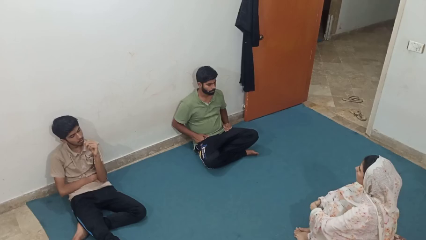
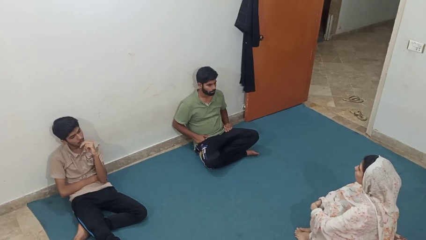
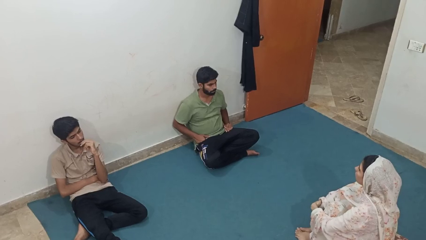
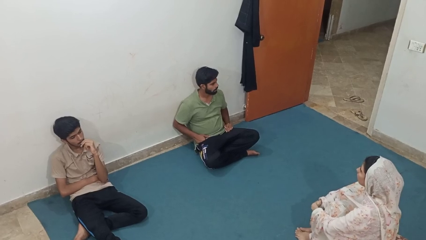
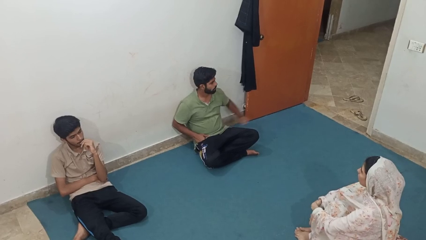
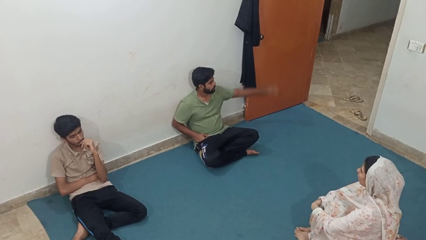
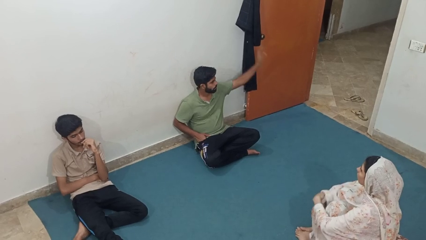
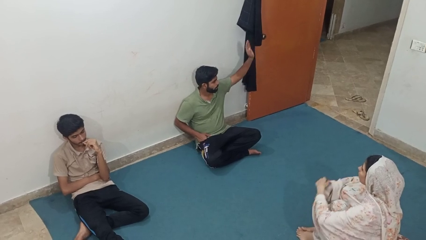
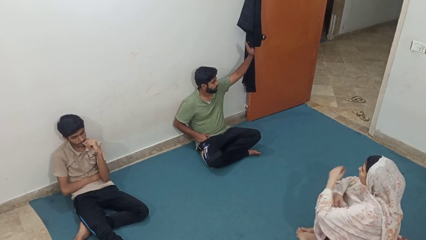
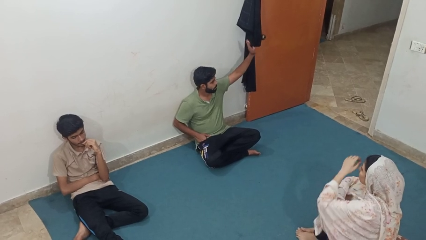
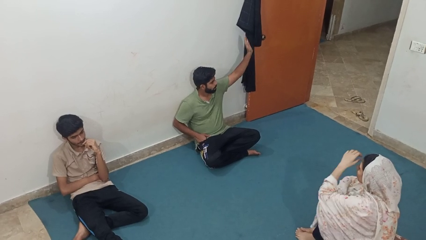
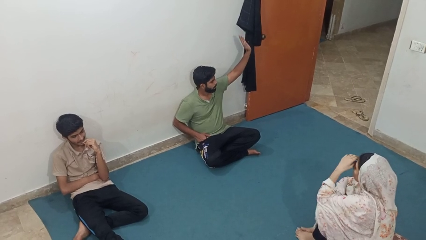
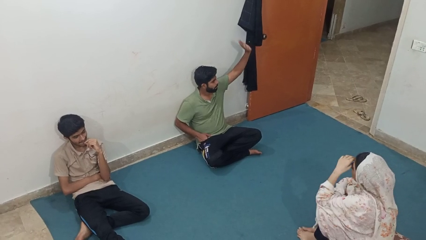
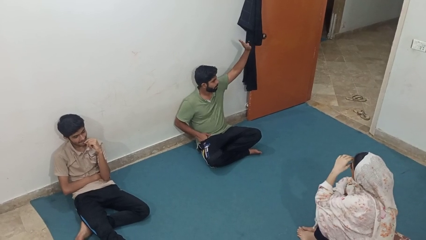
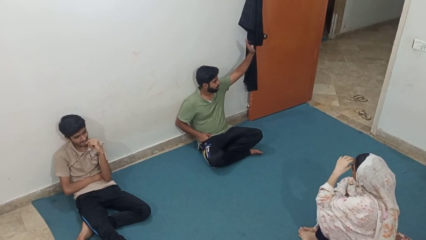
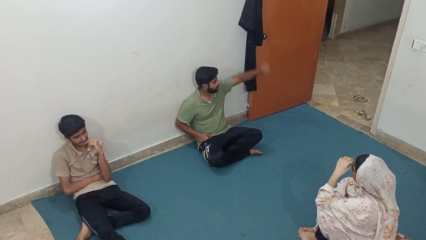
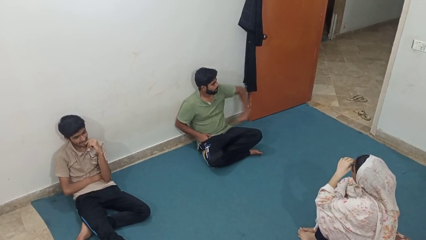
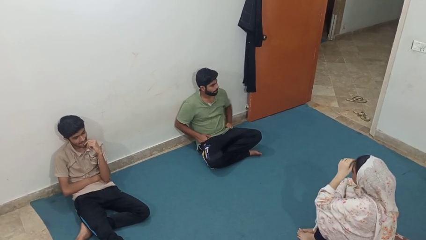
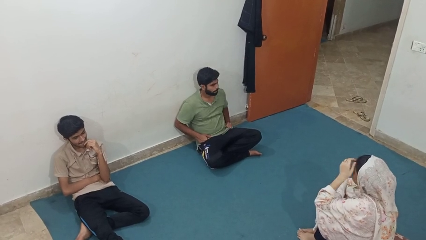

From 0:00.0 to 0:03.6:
person waves at person

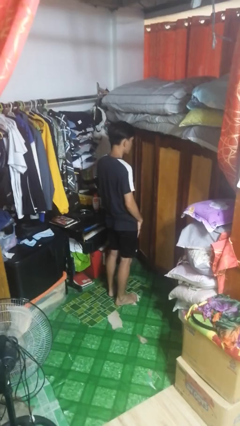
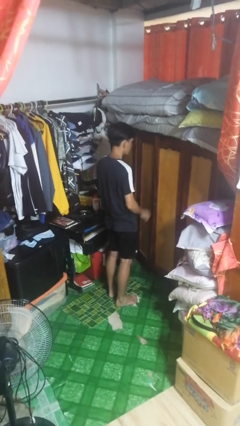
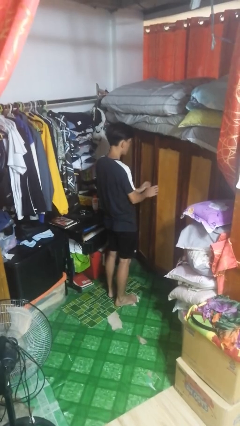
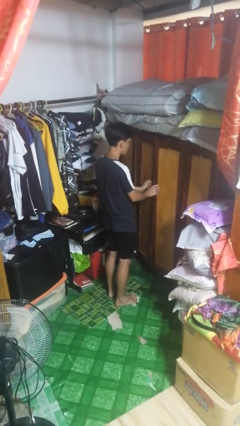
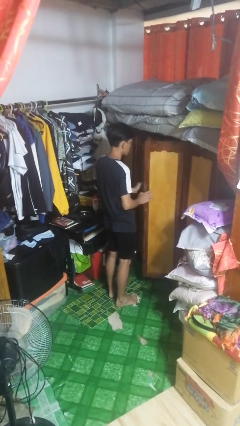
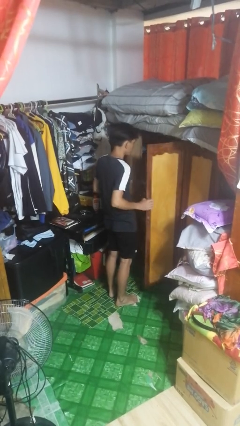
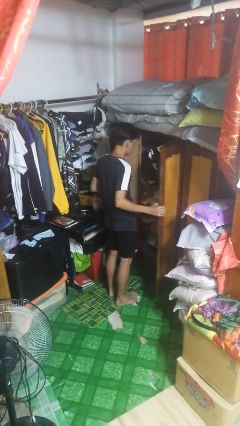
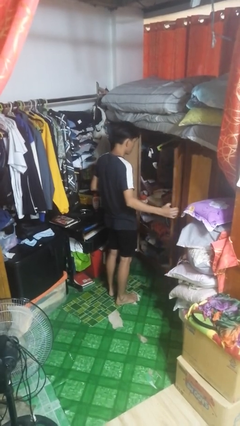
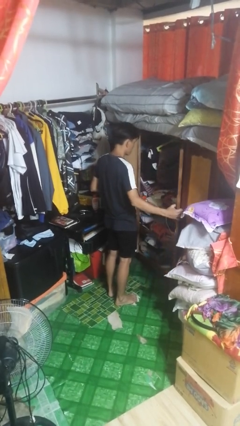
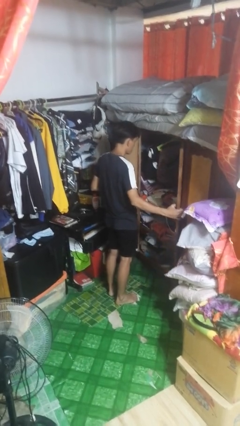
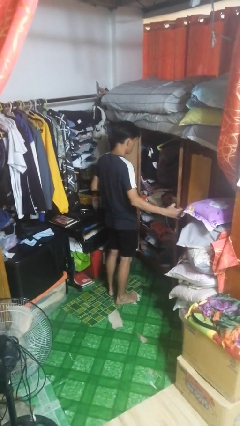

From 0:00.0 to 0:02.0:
person opens dresser drawer

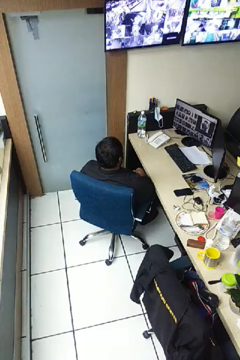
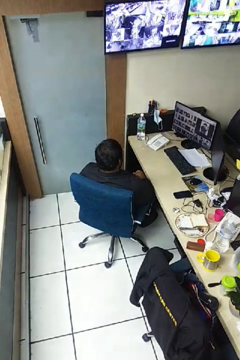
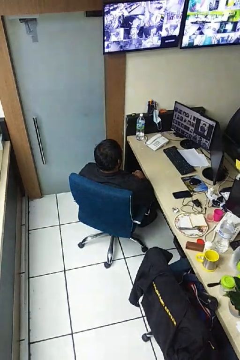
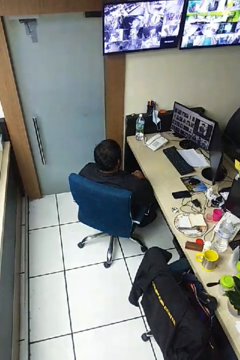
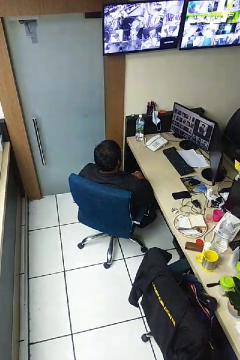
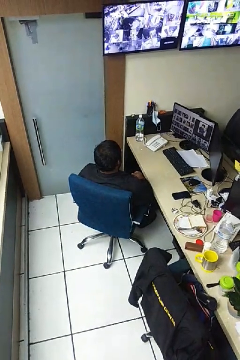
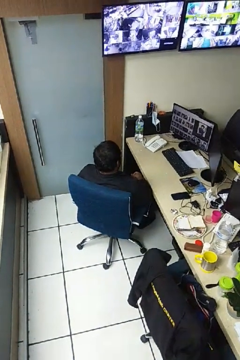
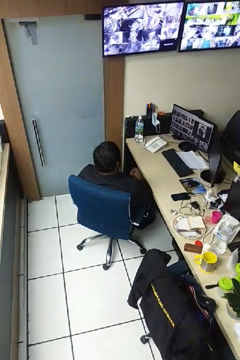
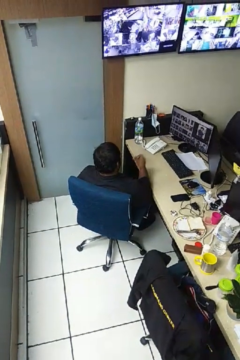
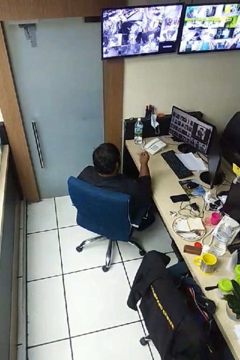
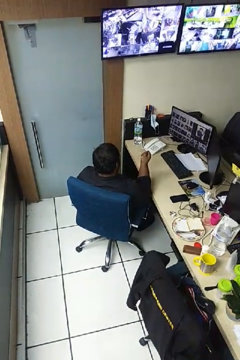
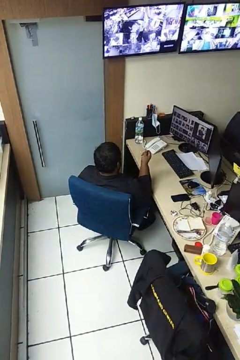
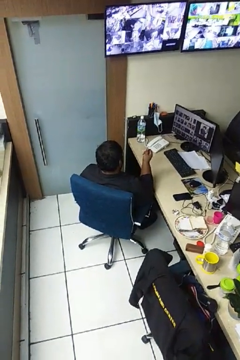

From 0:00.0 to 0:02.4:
person snaps fingers

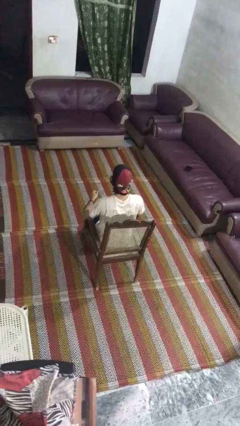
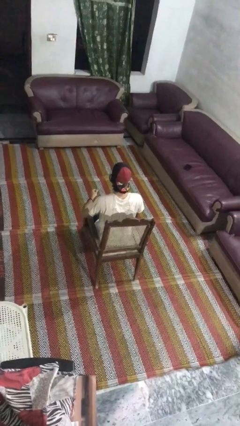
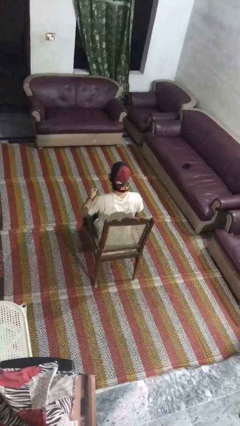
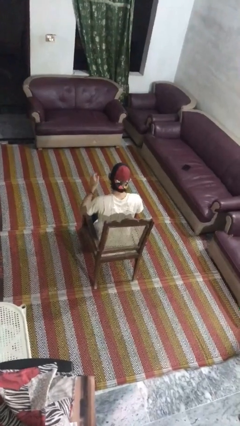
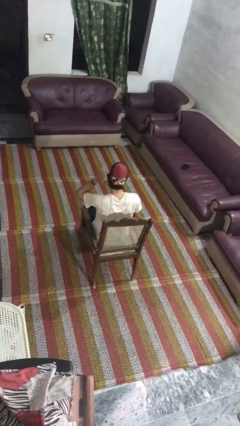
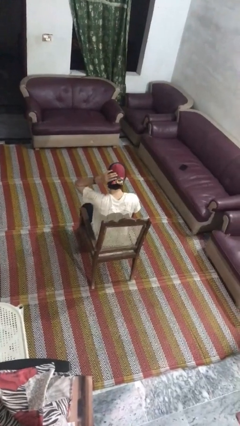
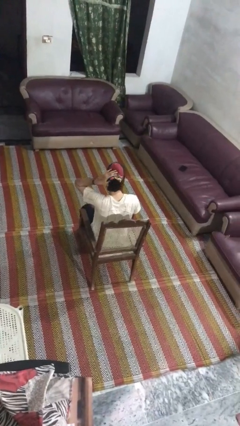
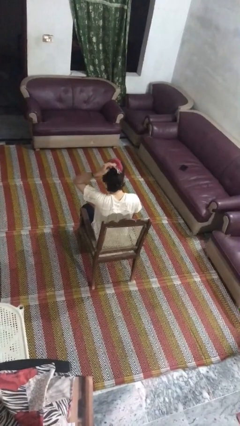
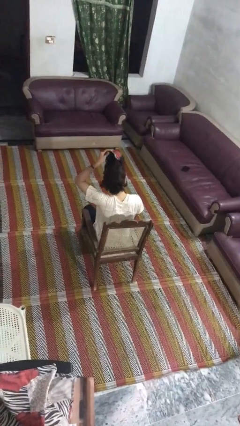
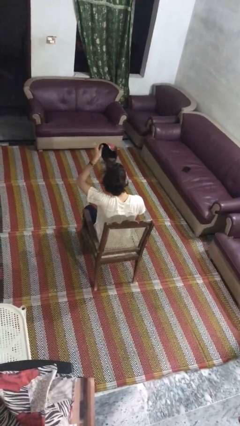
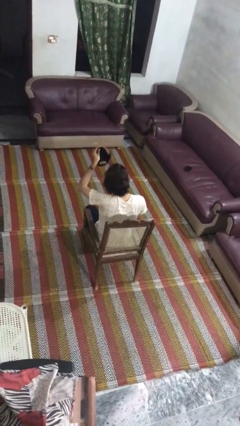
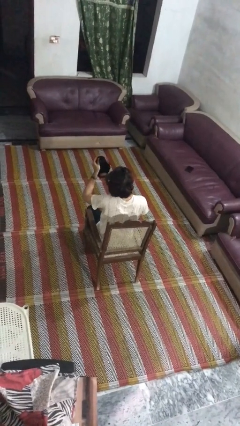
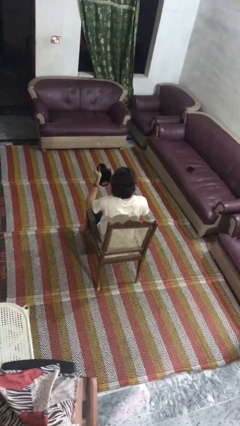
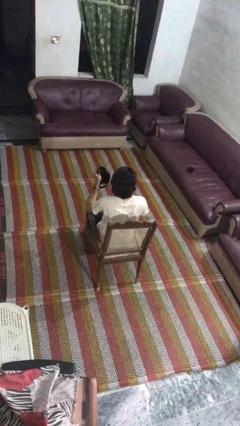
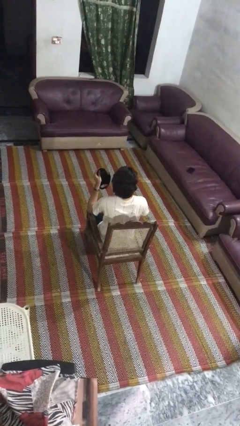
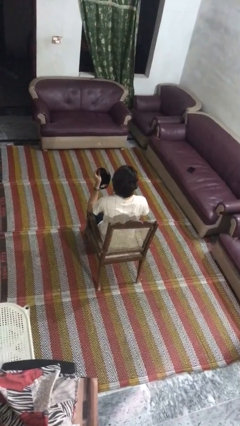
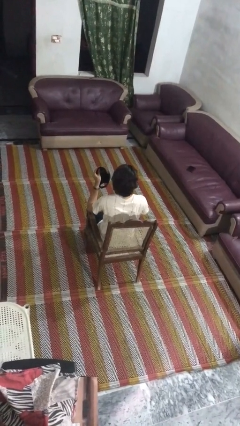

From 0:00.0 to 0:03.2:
person takes off hat

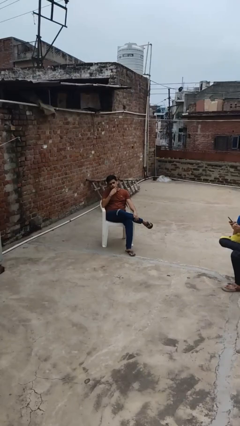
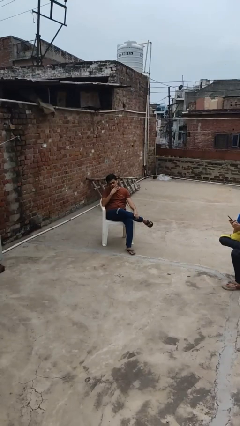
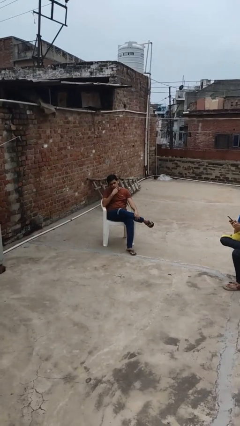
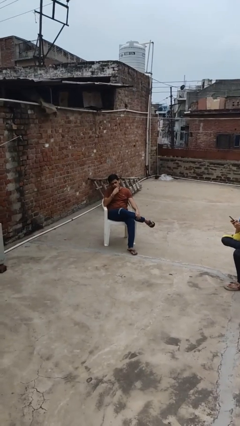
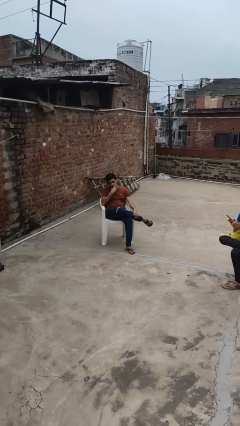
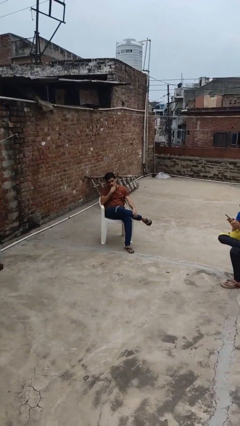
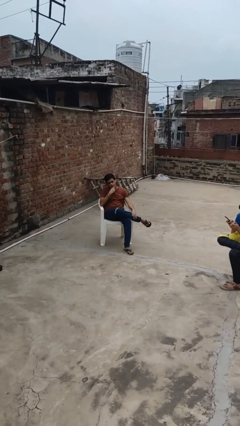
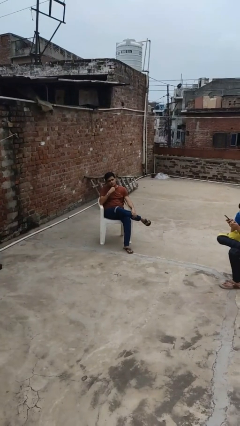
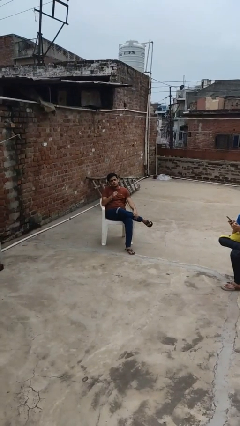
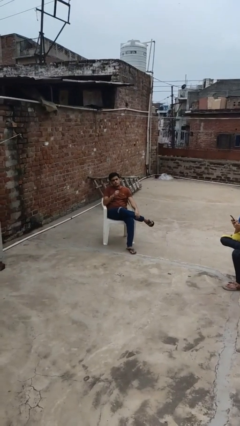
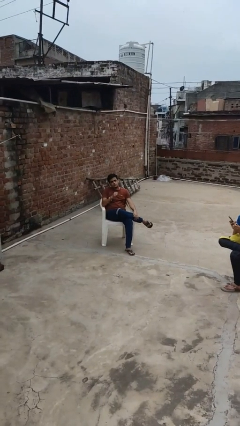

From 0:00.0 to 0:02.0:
person strokes chin

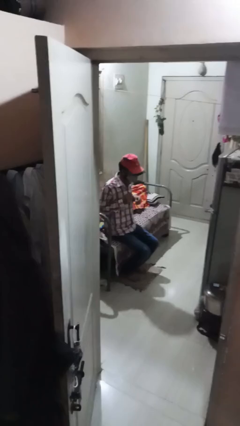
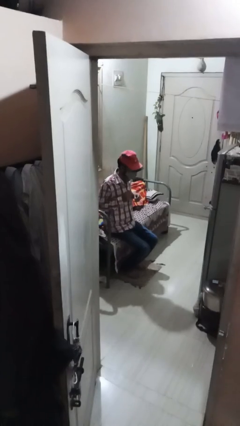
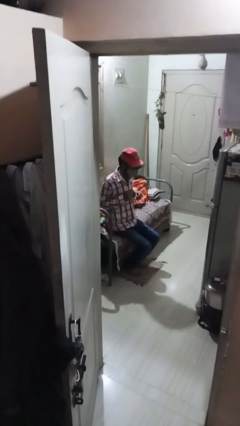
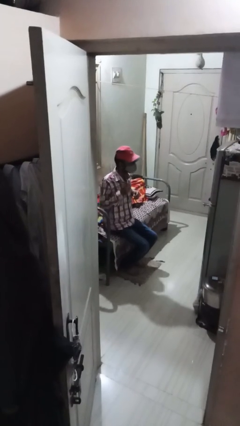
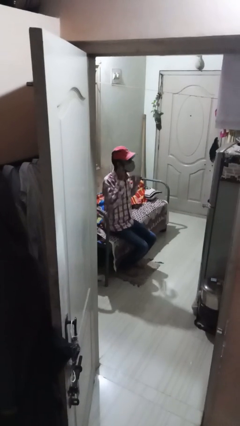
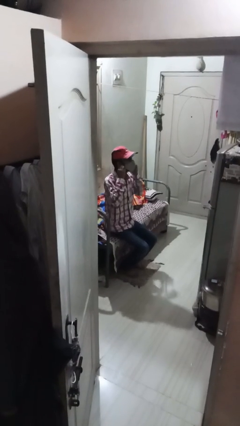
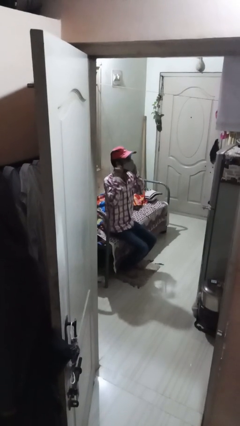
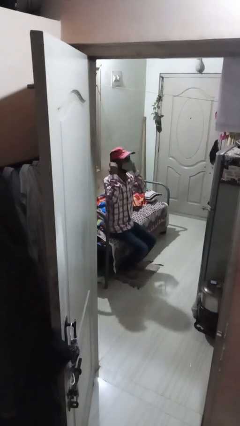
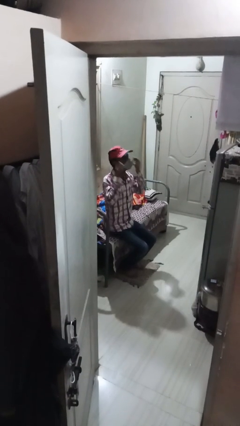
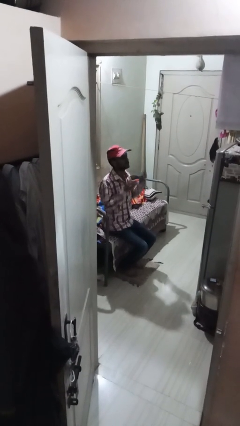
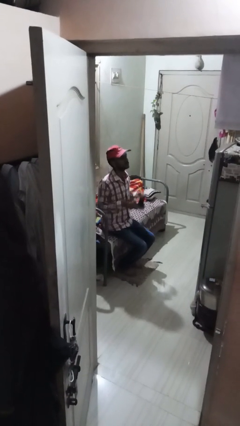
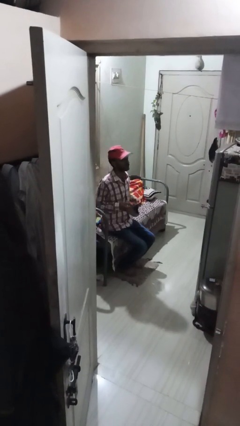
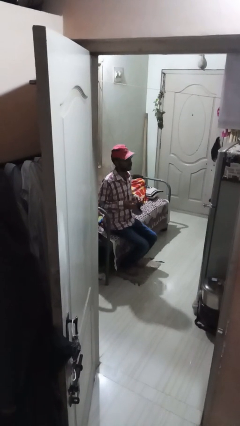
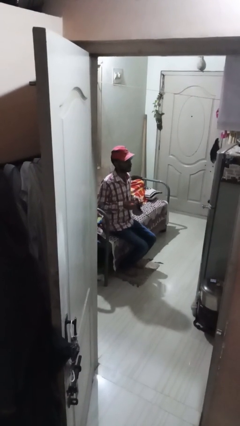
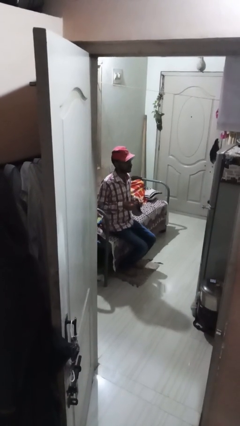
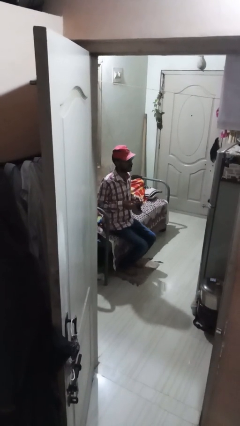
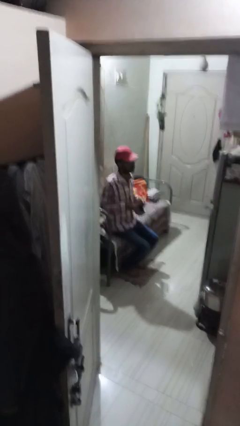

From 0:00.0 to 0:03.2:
person takes off facemask

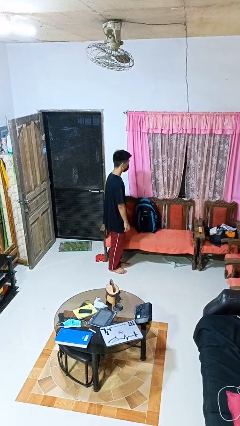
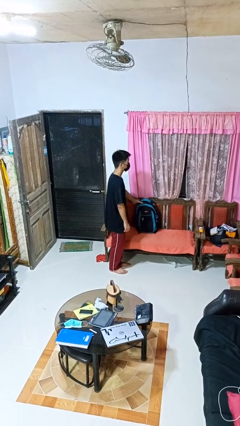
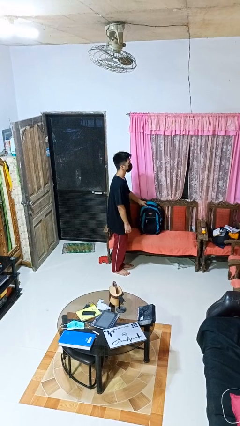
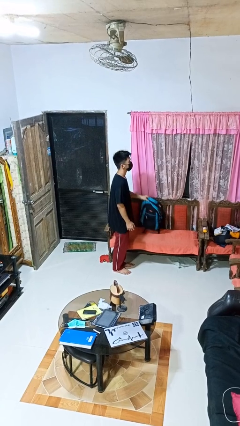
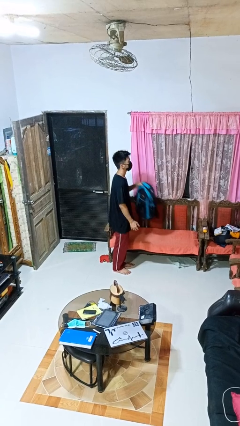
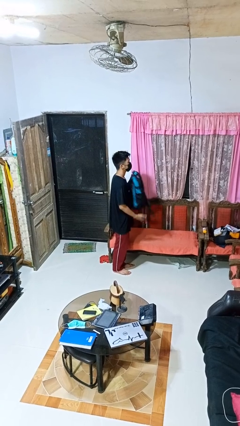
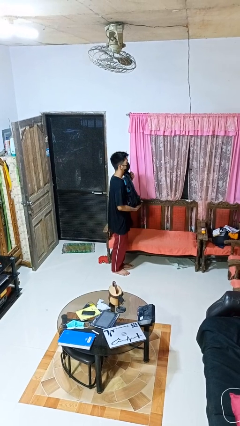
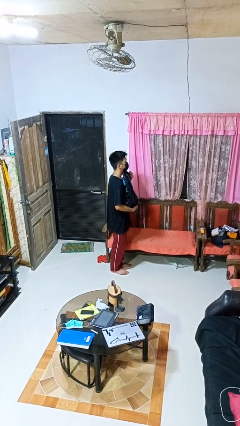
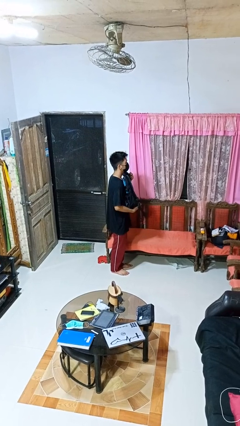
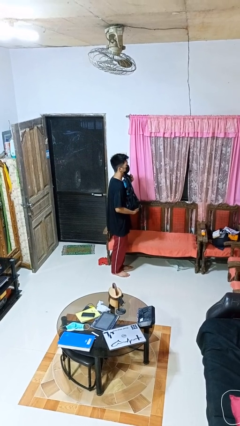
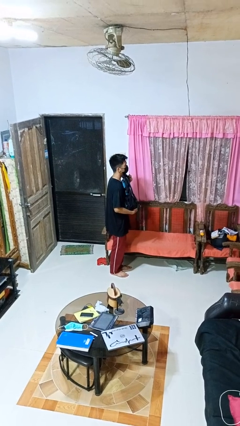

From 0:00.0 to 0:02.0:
person picks up object from couch
